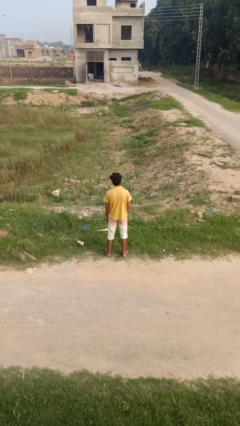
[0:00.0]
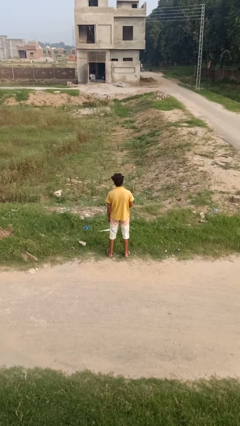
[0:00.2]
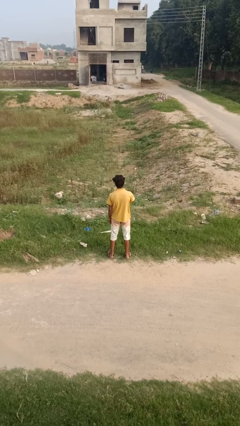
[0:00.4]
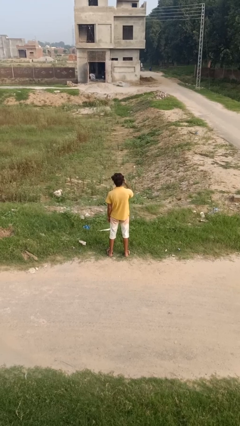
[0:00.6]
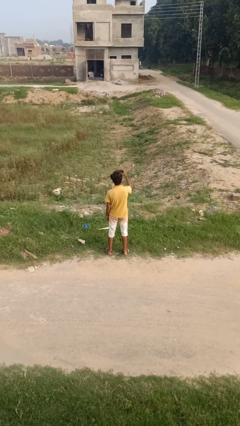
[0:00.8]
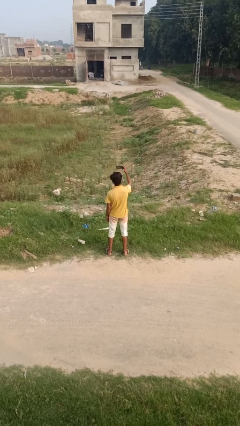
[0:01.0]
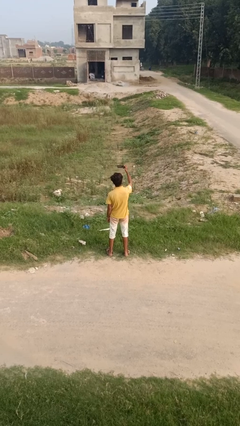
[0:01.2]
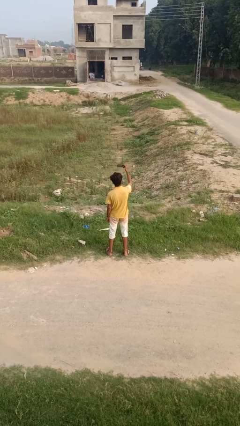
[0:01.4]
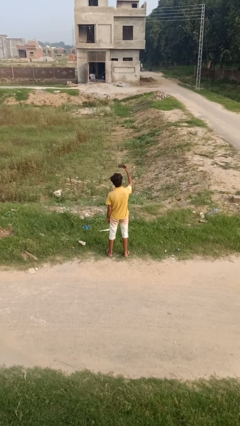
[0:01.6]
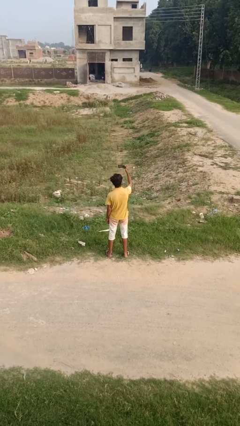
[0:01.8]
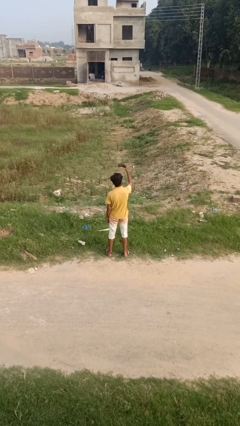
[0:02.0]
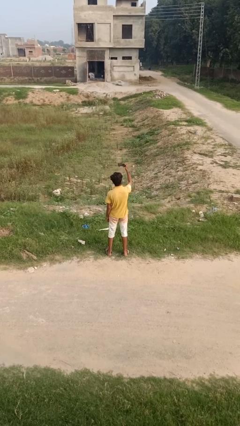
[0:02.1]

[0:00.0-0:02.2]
person takes selfie

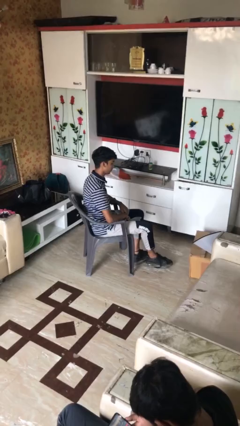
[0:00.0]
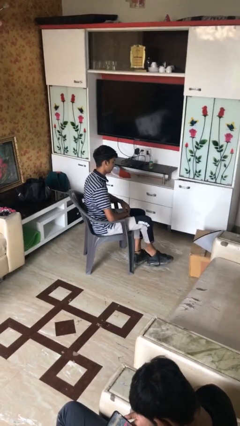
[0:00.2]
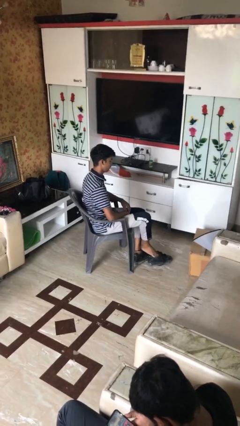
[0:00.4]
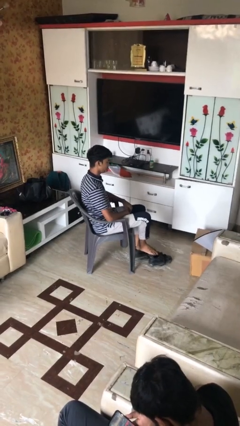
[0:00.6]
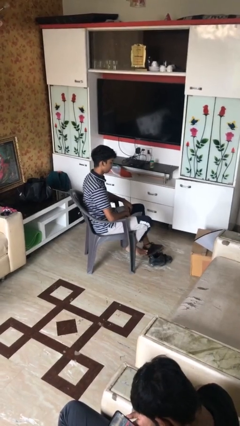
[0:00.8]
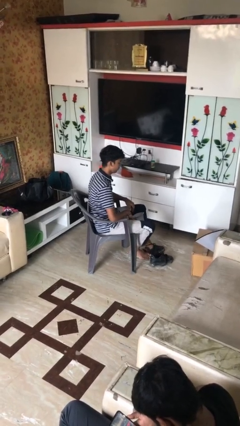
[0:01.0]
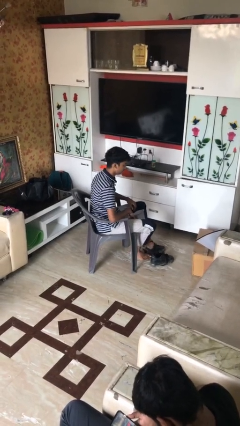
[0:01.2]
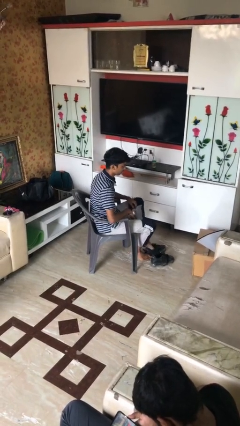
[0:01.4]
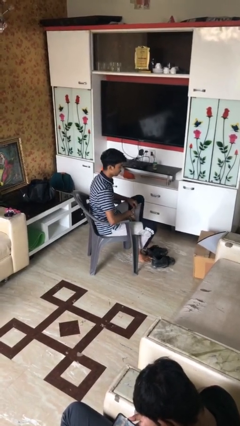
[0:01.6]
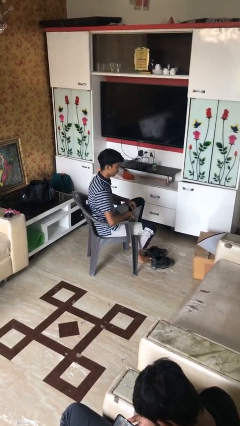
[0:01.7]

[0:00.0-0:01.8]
person takes off shoes

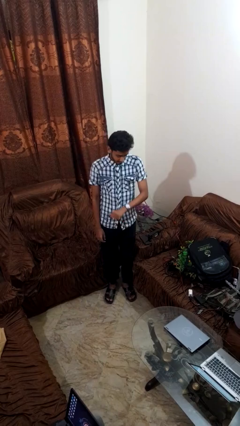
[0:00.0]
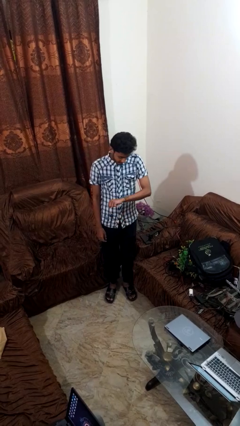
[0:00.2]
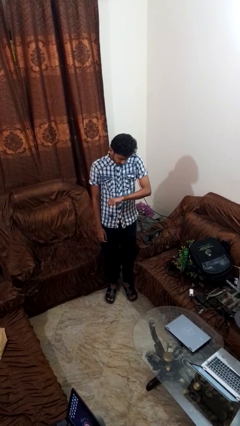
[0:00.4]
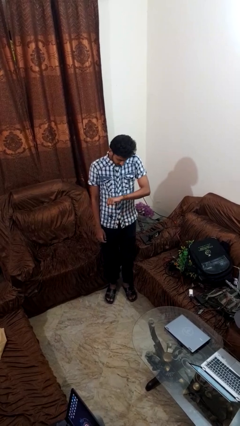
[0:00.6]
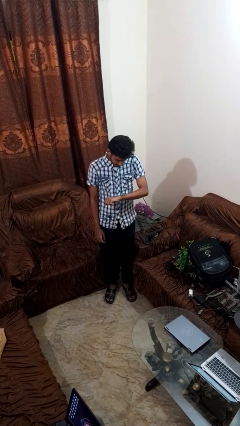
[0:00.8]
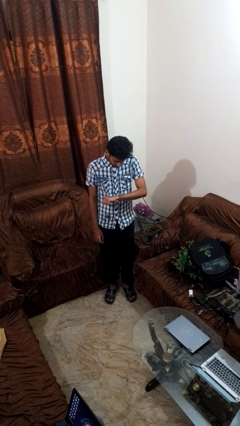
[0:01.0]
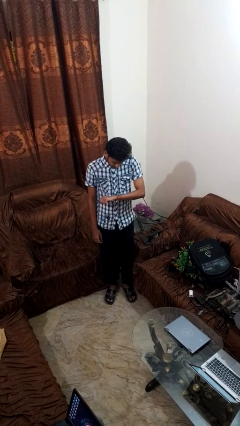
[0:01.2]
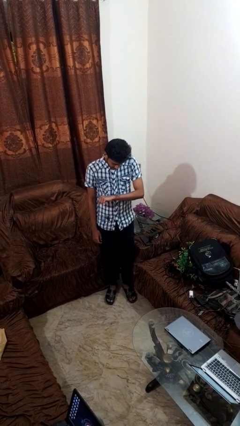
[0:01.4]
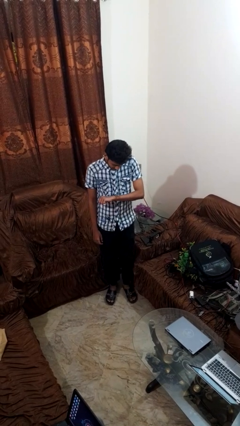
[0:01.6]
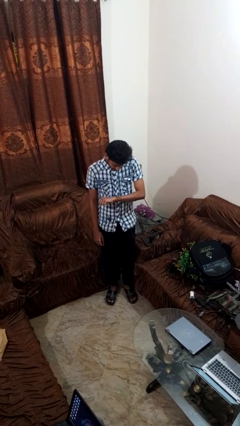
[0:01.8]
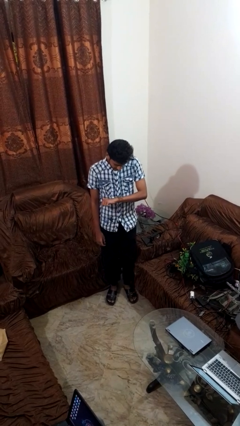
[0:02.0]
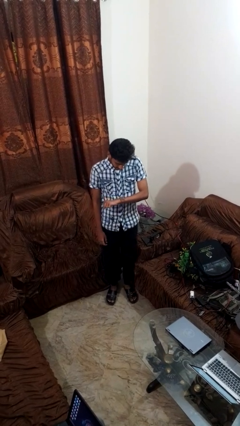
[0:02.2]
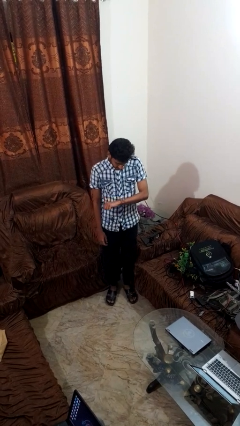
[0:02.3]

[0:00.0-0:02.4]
person looks at wristwatch

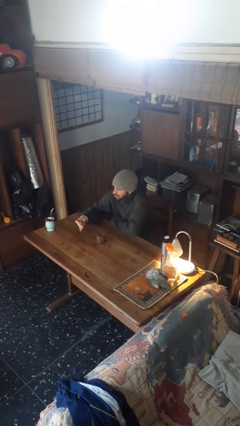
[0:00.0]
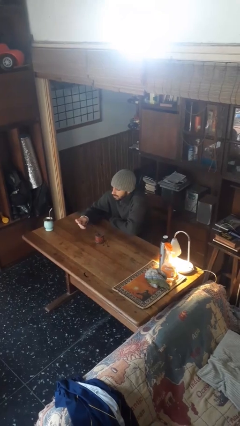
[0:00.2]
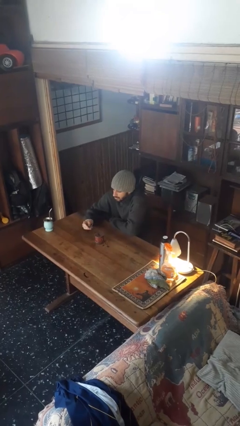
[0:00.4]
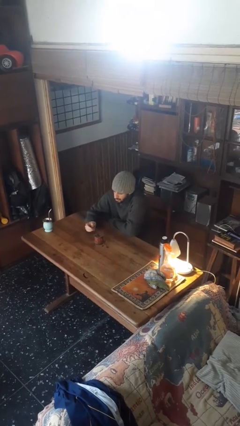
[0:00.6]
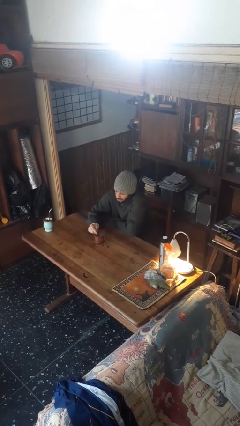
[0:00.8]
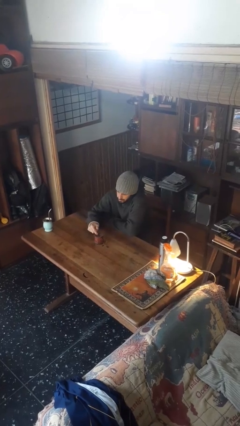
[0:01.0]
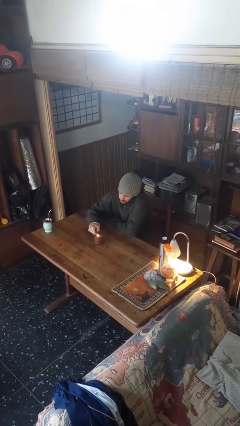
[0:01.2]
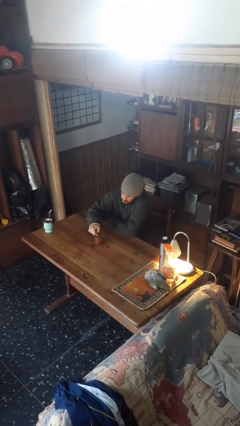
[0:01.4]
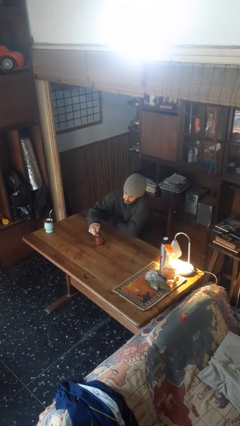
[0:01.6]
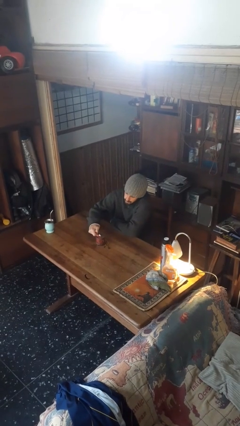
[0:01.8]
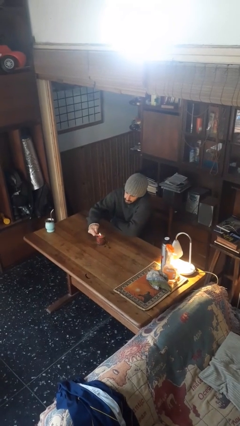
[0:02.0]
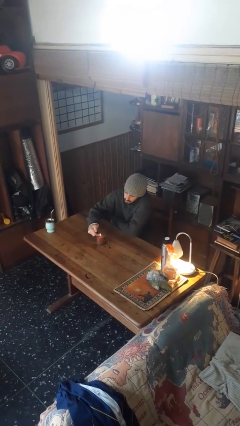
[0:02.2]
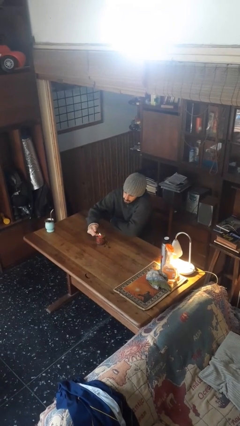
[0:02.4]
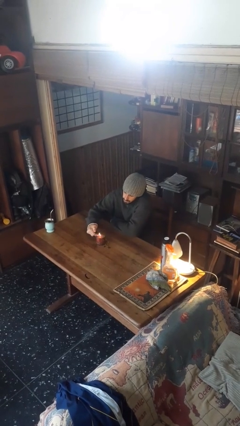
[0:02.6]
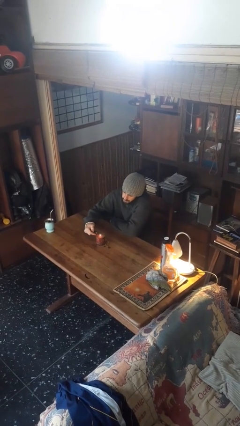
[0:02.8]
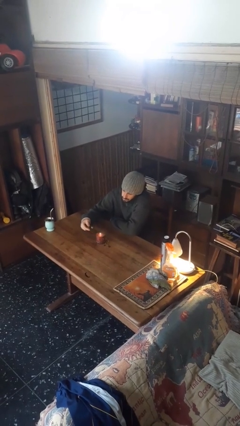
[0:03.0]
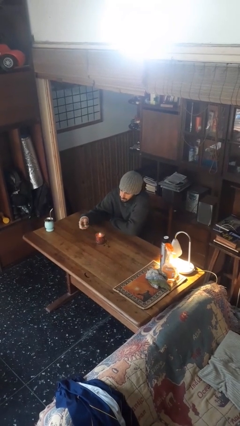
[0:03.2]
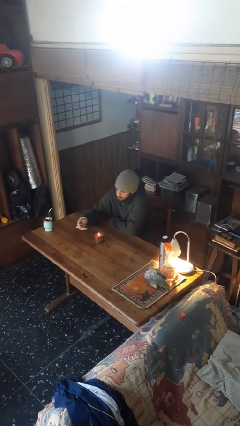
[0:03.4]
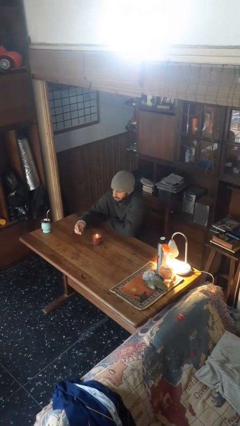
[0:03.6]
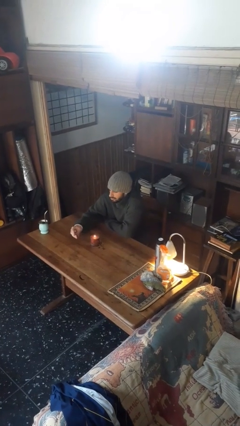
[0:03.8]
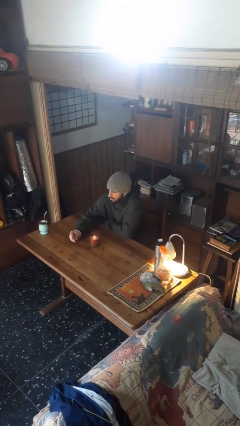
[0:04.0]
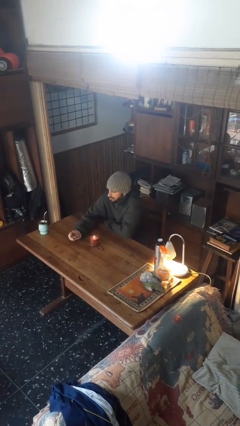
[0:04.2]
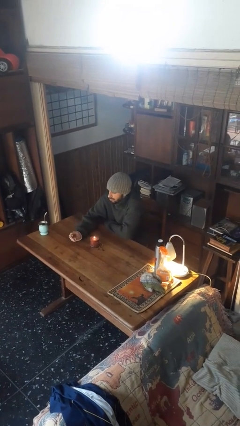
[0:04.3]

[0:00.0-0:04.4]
person lights candle

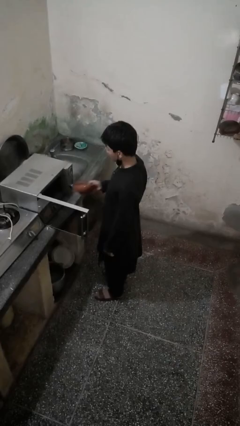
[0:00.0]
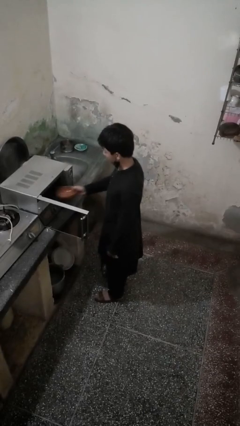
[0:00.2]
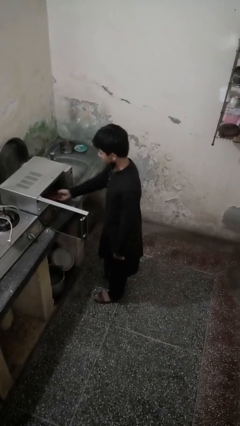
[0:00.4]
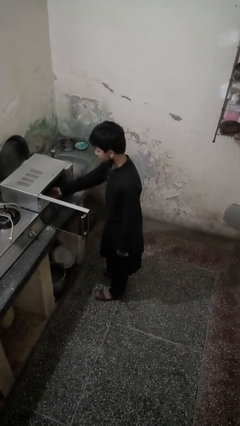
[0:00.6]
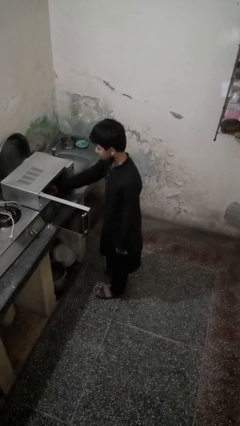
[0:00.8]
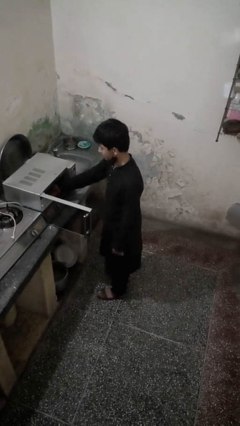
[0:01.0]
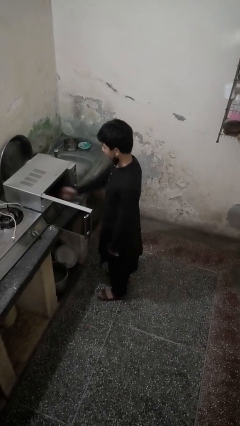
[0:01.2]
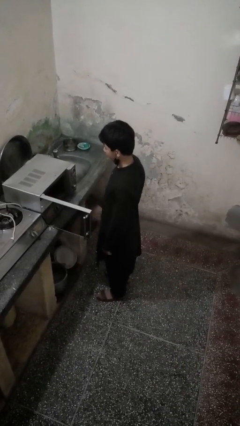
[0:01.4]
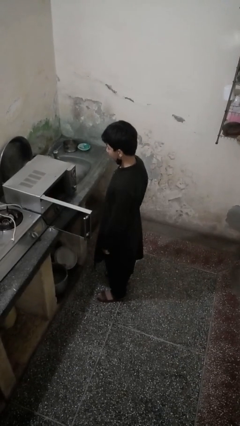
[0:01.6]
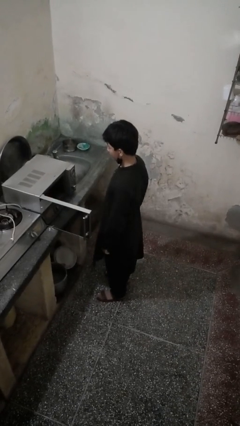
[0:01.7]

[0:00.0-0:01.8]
person puts object into microwave

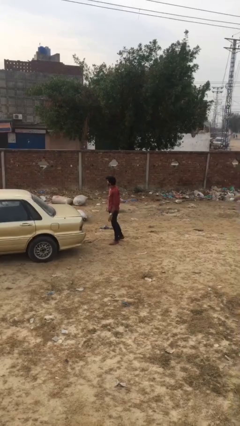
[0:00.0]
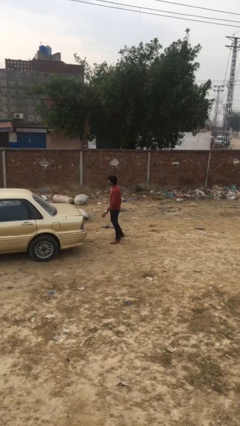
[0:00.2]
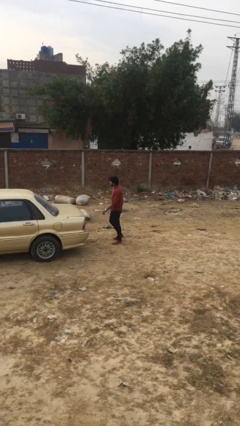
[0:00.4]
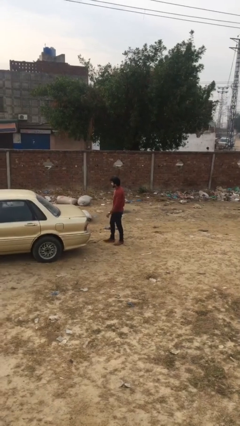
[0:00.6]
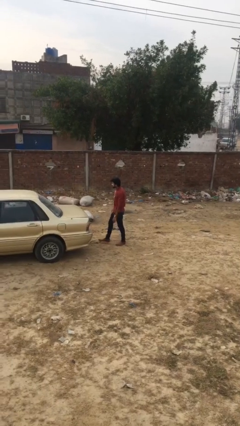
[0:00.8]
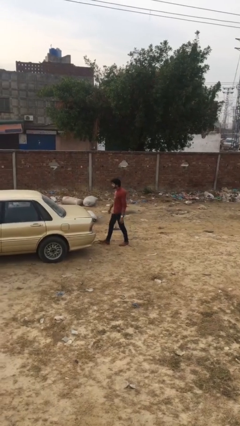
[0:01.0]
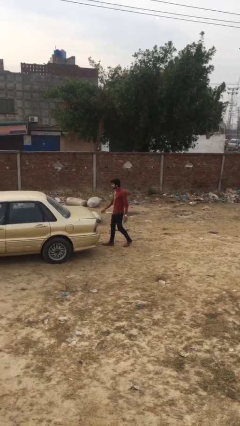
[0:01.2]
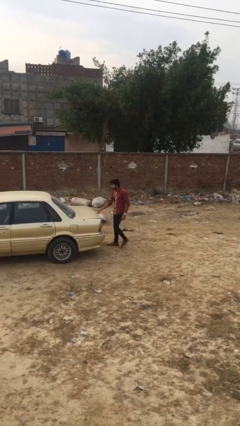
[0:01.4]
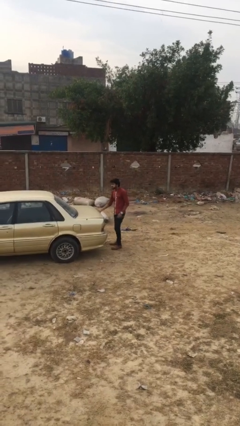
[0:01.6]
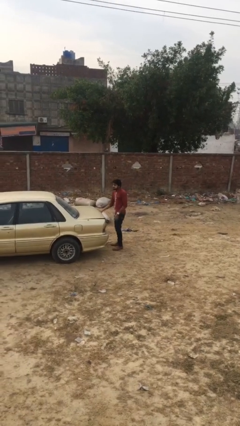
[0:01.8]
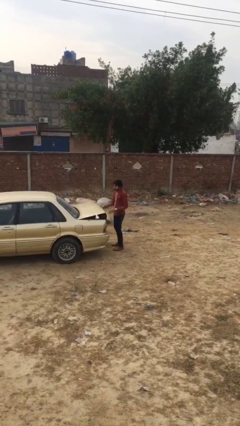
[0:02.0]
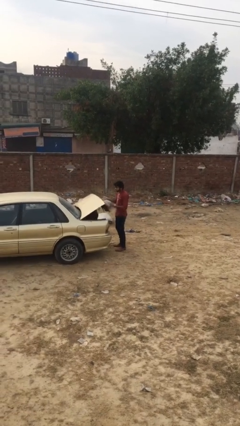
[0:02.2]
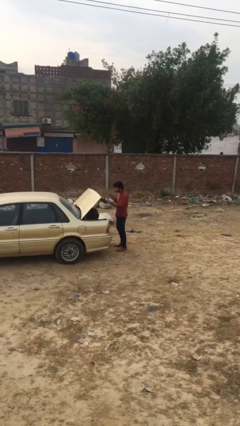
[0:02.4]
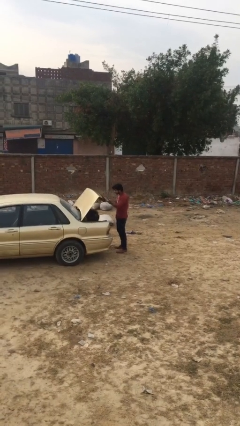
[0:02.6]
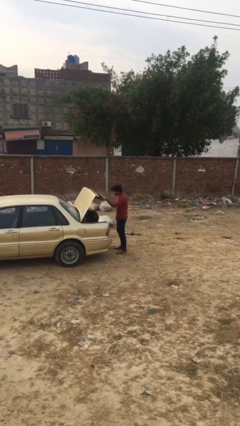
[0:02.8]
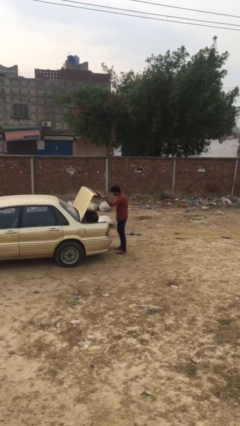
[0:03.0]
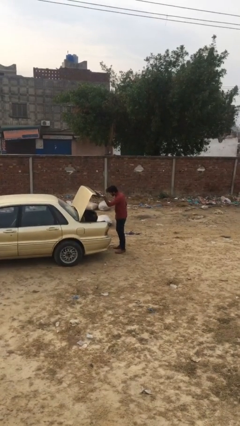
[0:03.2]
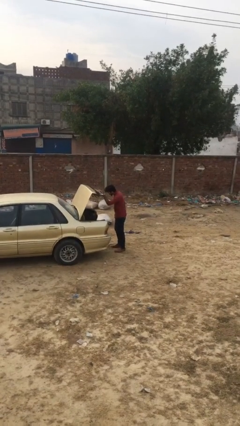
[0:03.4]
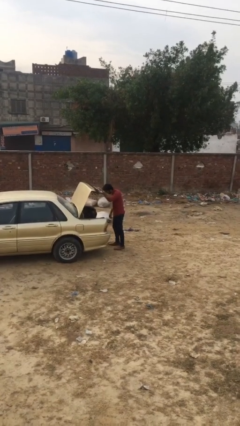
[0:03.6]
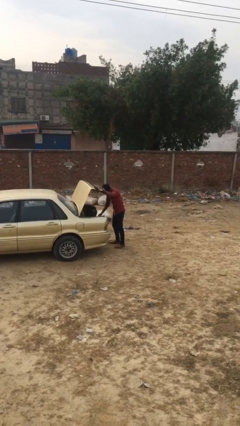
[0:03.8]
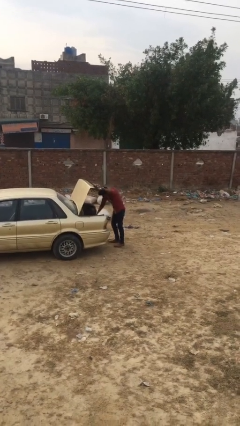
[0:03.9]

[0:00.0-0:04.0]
person opens car trunk

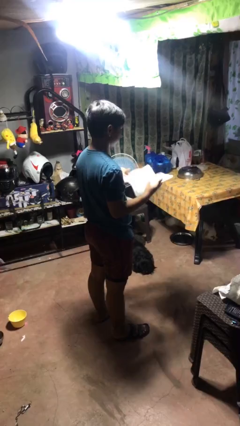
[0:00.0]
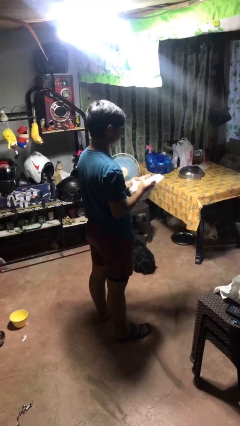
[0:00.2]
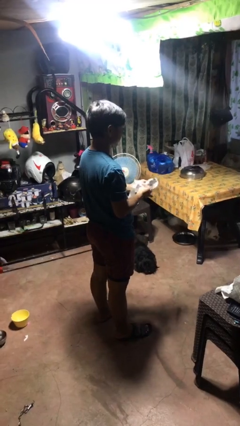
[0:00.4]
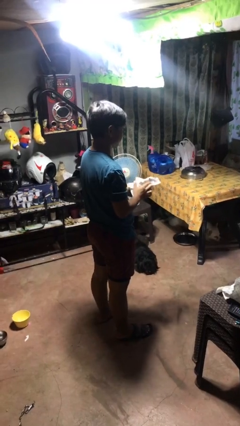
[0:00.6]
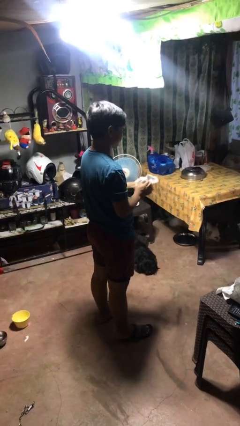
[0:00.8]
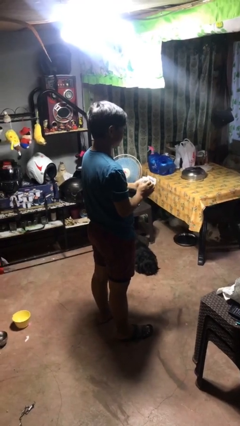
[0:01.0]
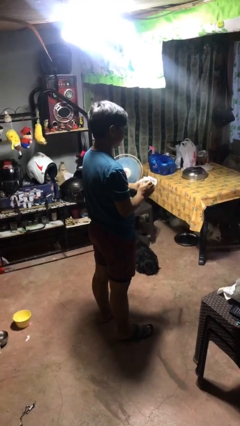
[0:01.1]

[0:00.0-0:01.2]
person crumples paper
